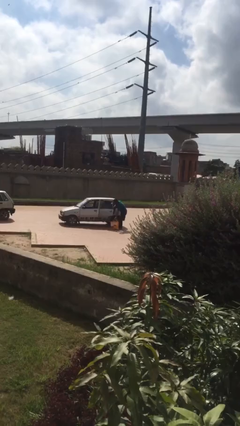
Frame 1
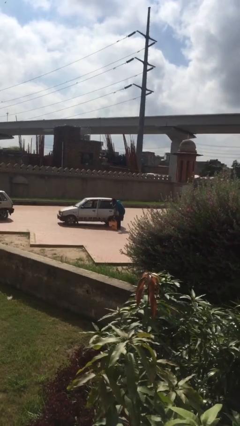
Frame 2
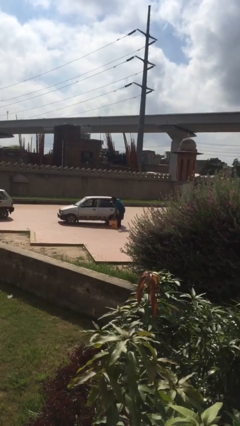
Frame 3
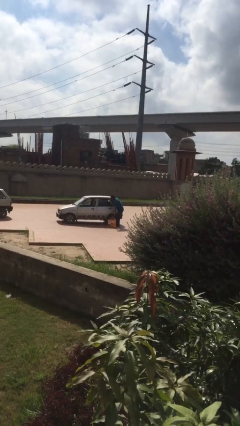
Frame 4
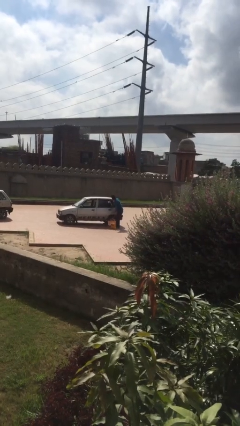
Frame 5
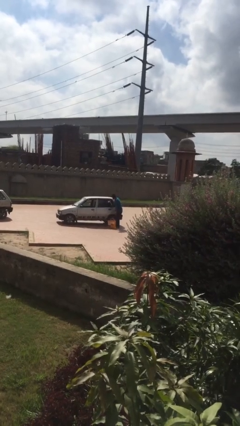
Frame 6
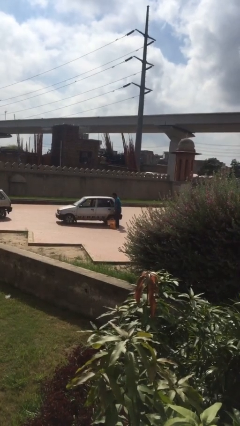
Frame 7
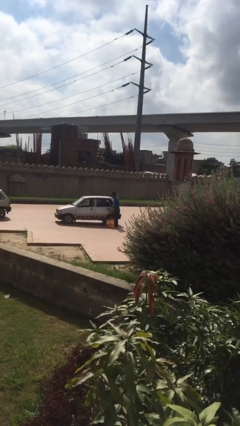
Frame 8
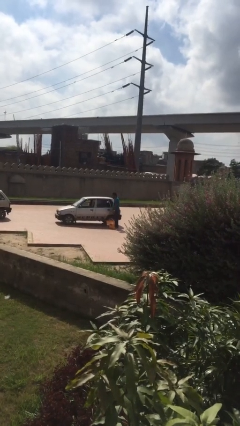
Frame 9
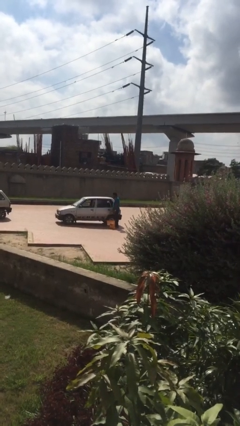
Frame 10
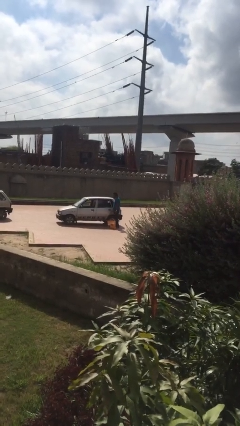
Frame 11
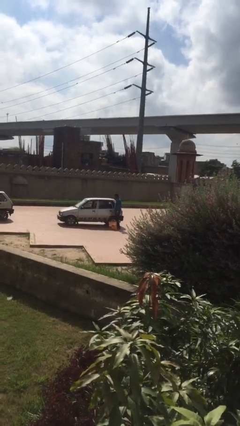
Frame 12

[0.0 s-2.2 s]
person closes car door

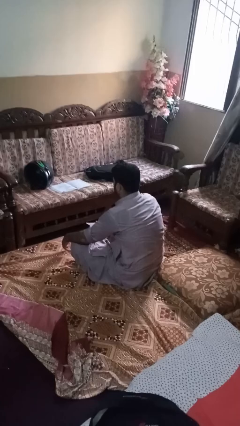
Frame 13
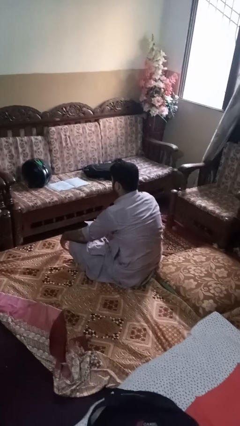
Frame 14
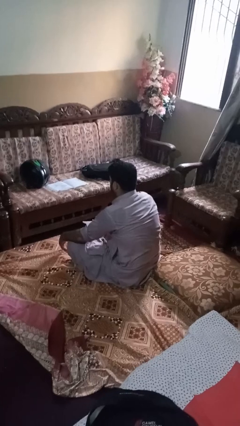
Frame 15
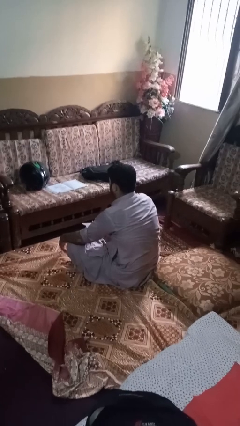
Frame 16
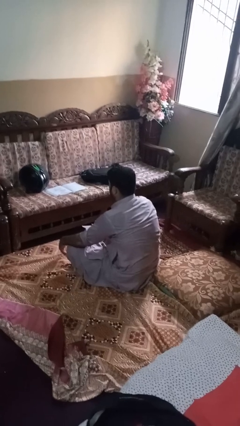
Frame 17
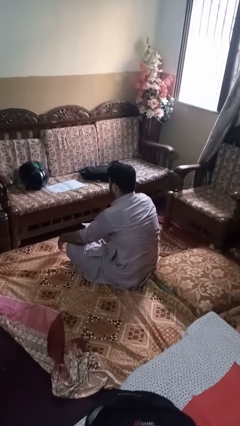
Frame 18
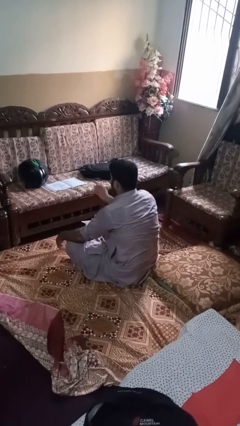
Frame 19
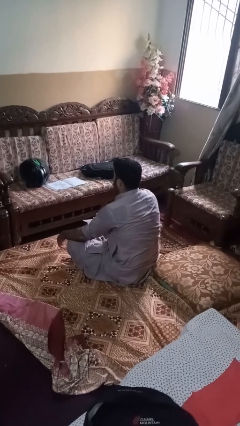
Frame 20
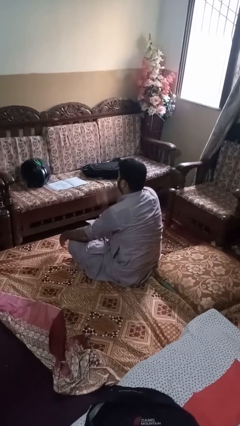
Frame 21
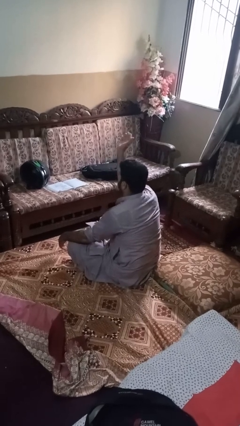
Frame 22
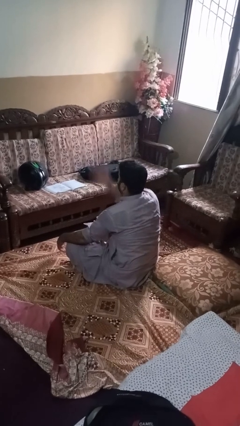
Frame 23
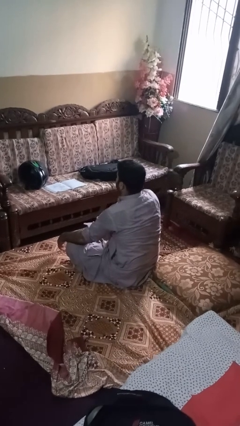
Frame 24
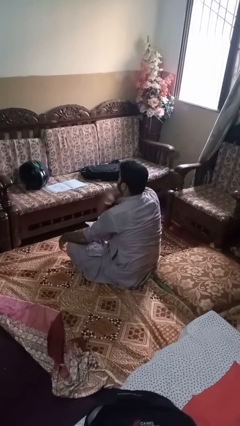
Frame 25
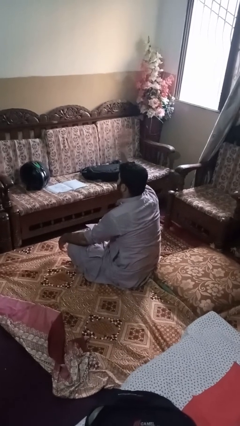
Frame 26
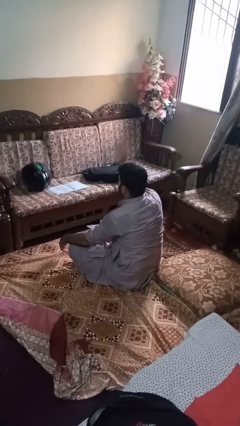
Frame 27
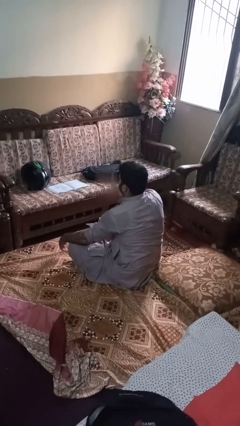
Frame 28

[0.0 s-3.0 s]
person drums on chest

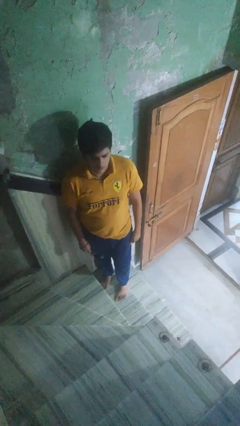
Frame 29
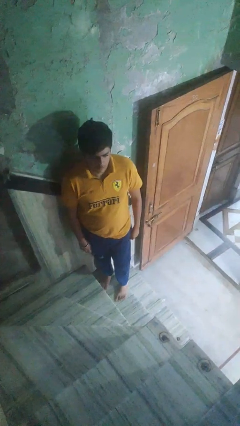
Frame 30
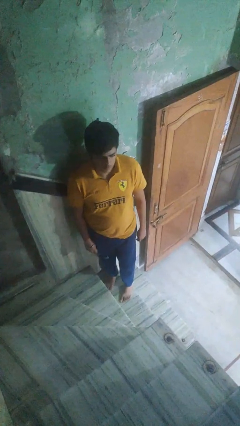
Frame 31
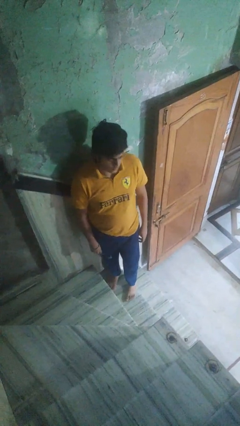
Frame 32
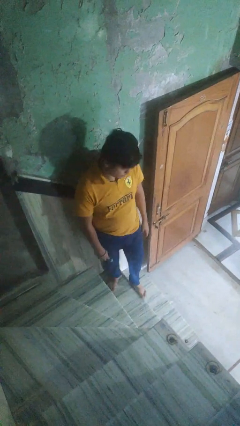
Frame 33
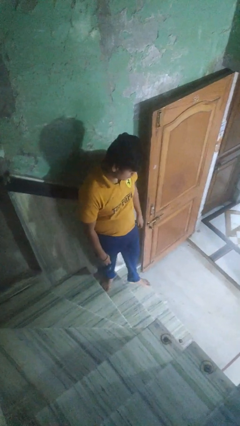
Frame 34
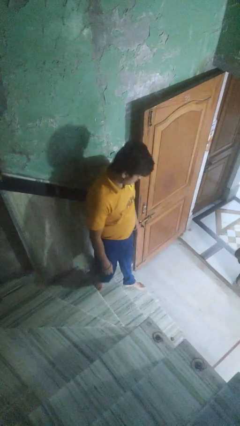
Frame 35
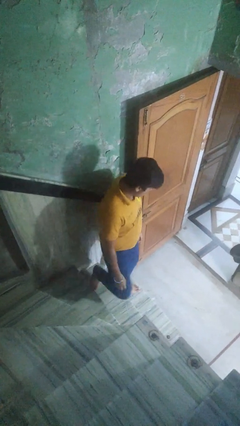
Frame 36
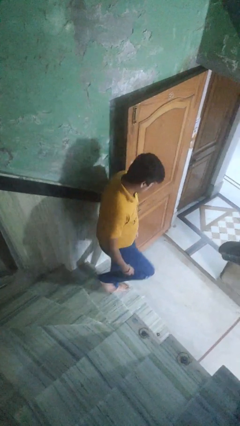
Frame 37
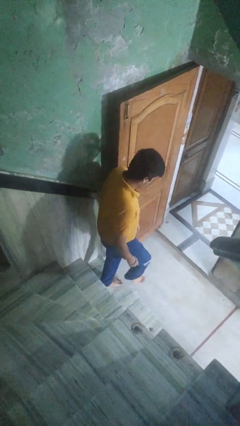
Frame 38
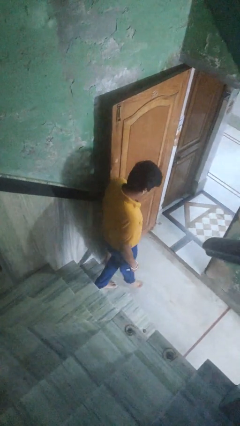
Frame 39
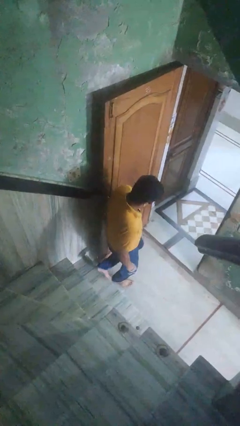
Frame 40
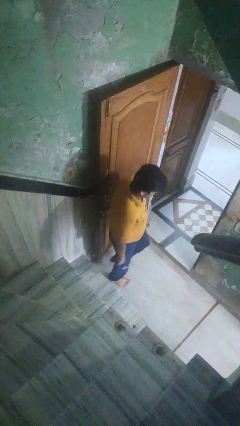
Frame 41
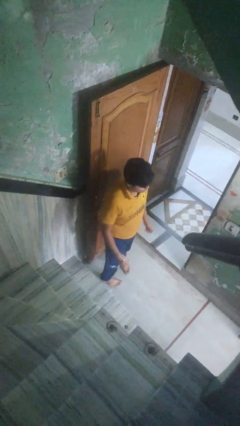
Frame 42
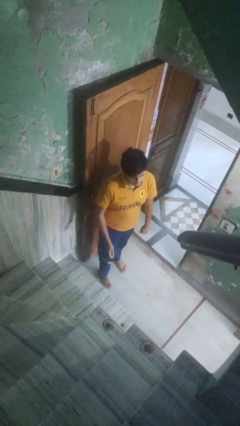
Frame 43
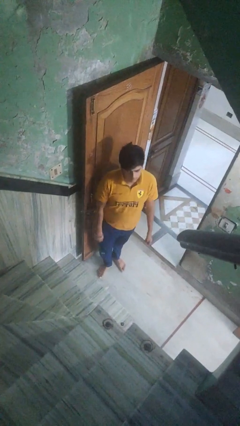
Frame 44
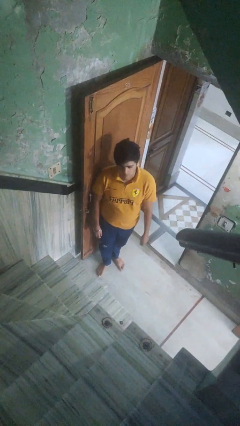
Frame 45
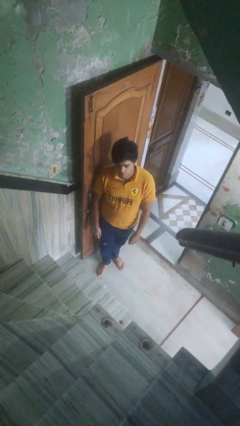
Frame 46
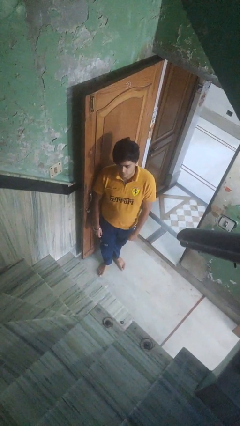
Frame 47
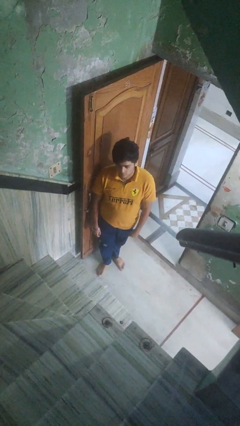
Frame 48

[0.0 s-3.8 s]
person climbs down stairs

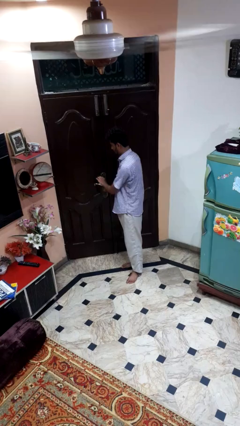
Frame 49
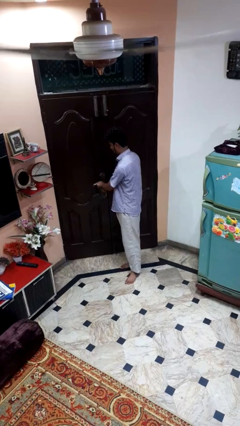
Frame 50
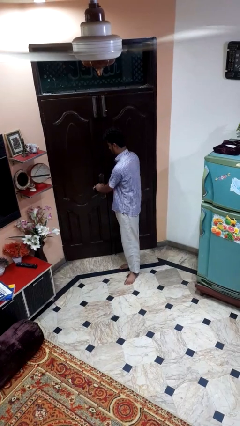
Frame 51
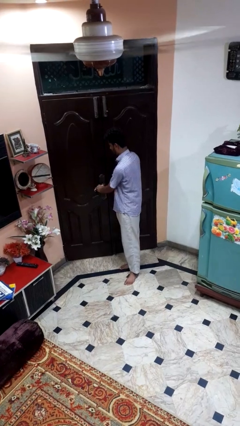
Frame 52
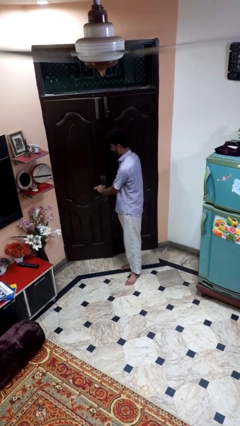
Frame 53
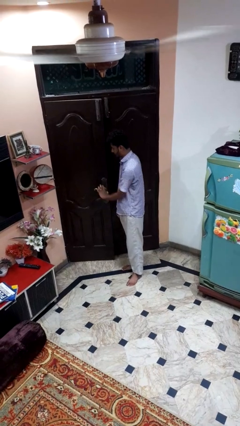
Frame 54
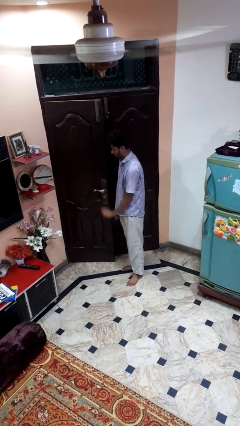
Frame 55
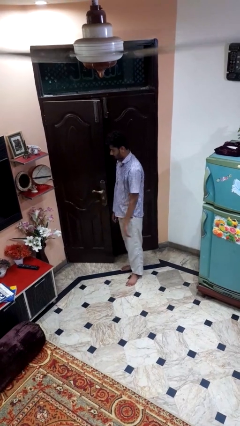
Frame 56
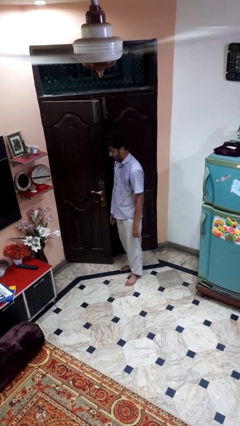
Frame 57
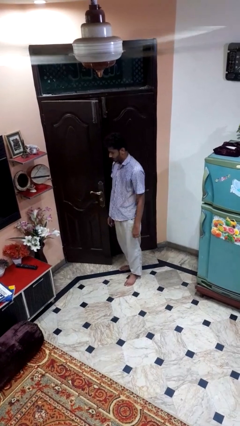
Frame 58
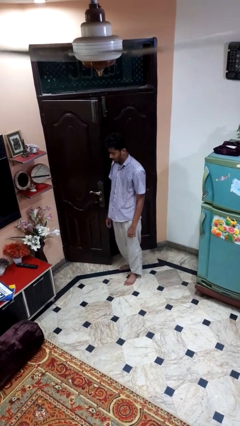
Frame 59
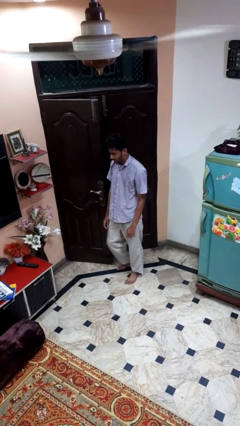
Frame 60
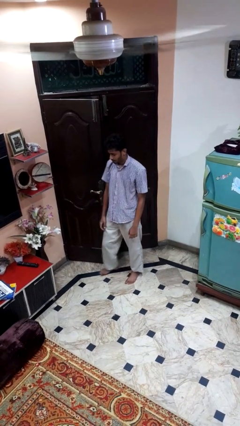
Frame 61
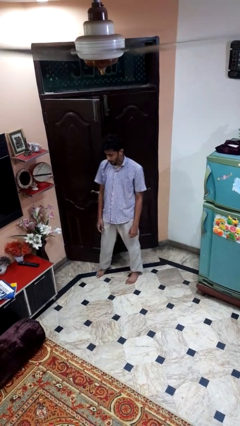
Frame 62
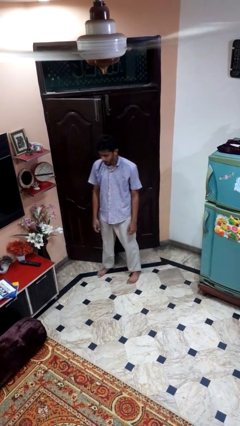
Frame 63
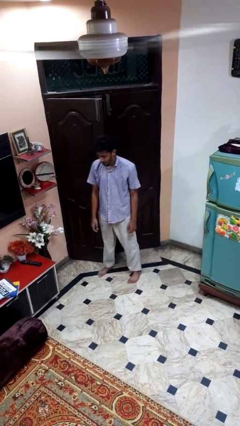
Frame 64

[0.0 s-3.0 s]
person opens facility door

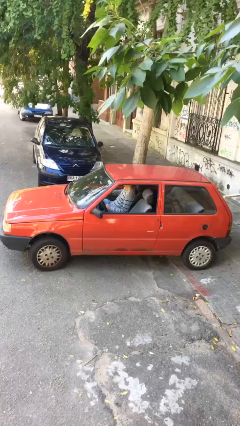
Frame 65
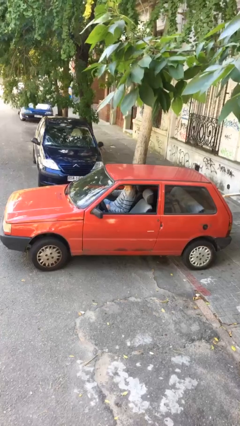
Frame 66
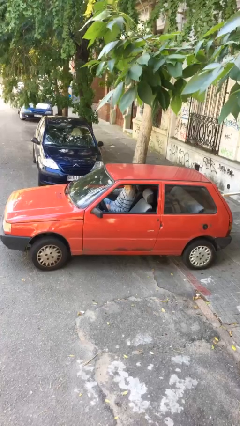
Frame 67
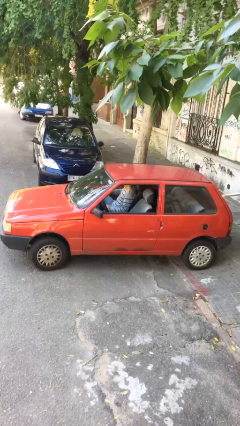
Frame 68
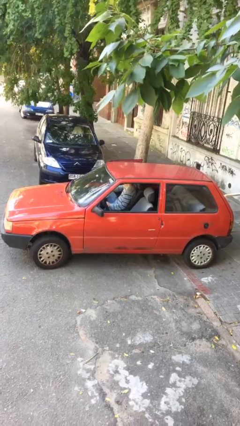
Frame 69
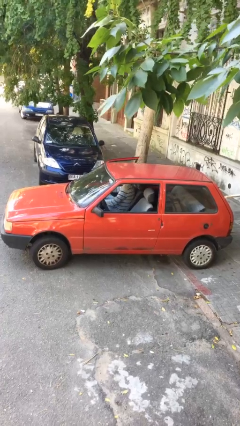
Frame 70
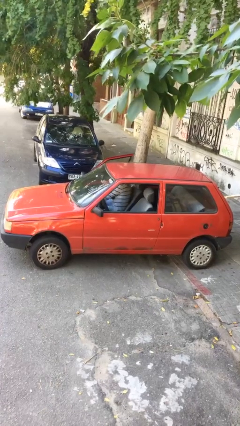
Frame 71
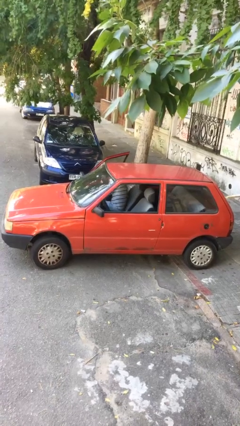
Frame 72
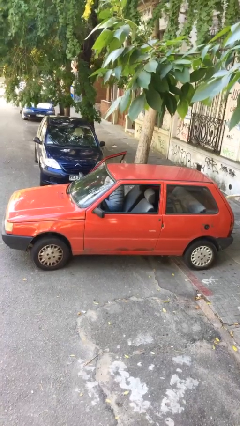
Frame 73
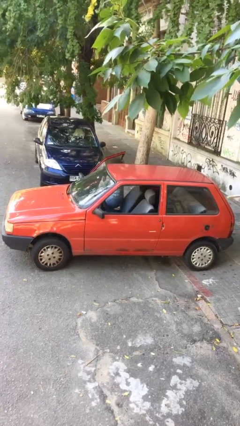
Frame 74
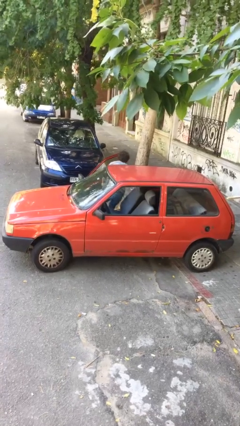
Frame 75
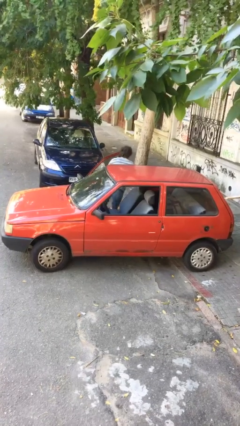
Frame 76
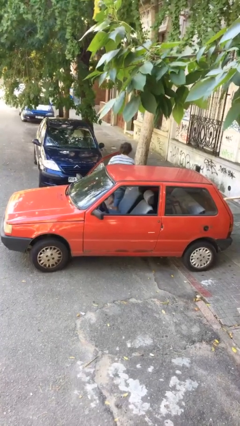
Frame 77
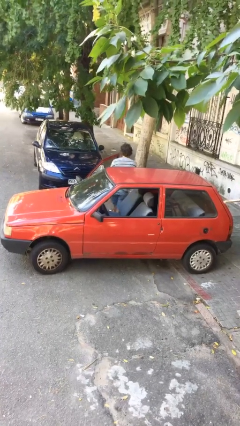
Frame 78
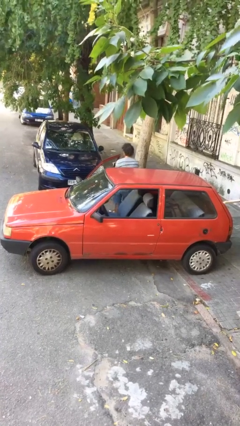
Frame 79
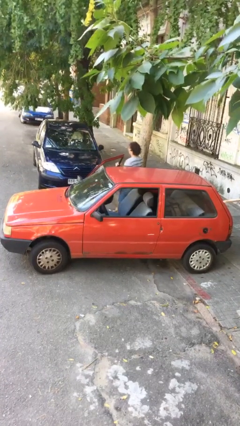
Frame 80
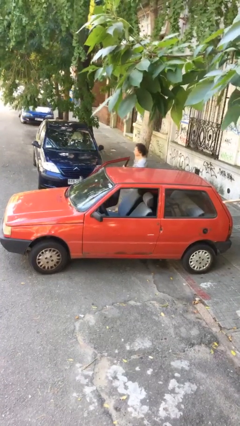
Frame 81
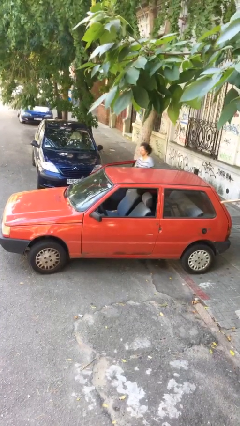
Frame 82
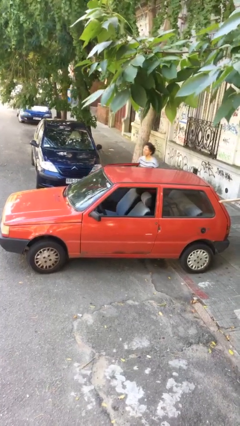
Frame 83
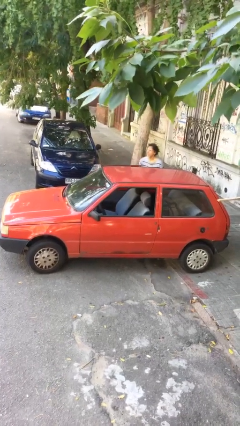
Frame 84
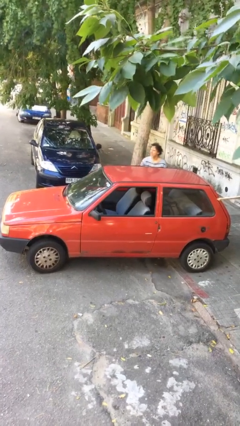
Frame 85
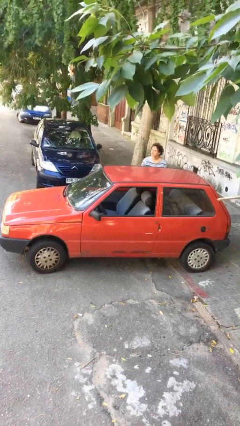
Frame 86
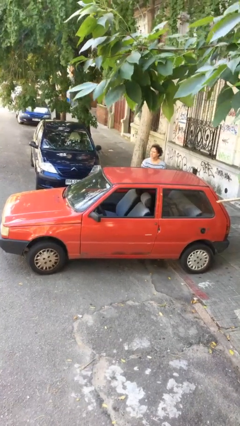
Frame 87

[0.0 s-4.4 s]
car drops off person

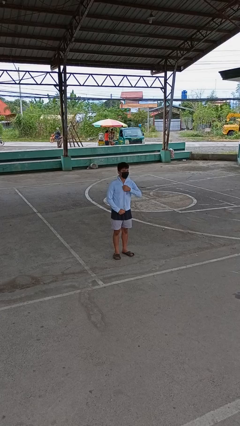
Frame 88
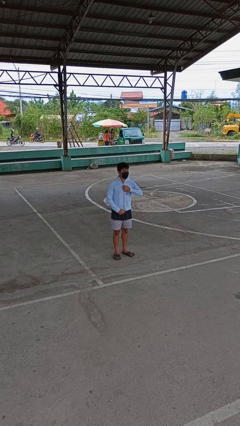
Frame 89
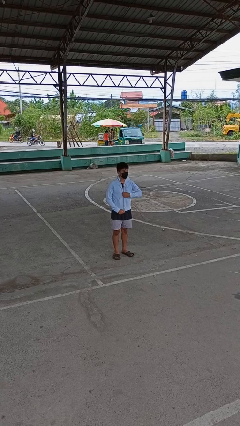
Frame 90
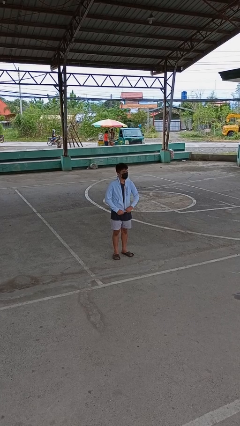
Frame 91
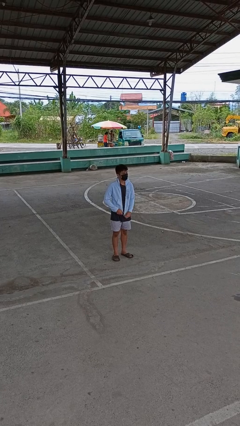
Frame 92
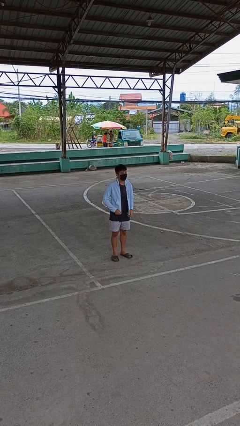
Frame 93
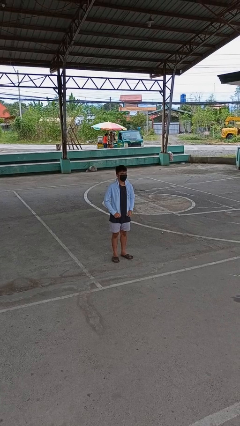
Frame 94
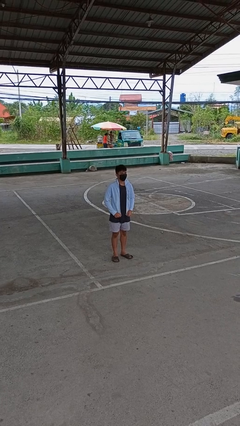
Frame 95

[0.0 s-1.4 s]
person unzips jacket
